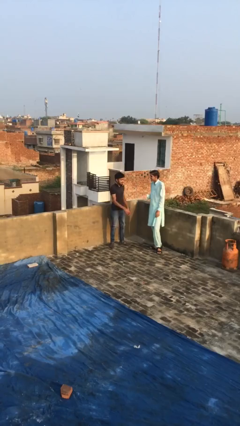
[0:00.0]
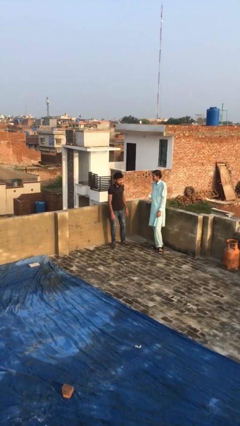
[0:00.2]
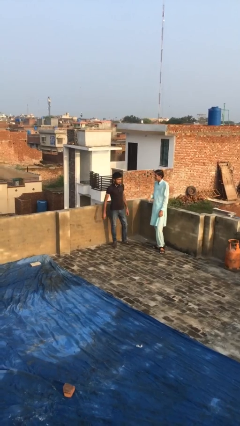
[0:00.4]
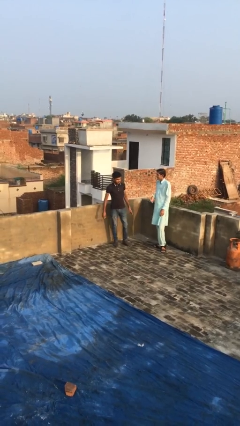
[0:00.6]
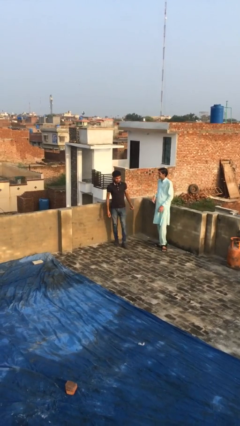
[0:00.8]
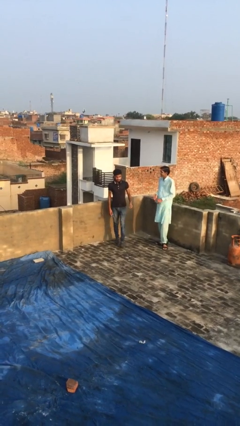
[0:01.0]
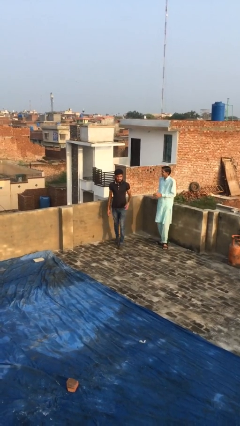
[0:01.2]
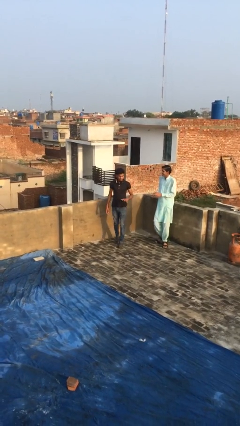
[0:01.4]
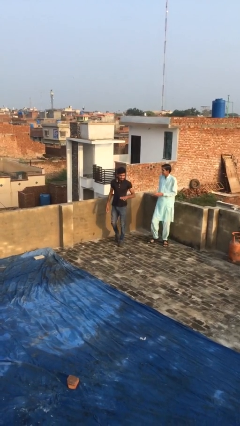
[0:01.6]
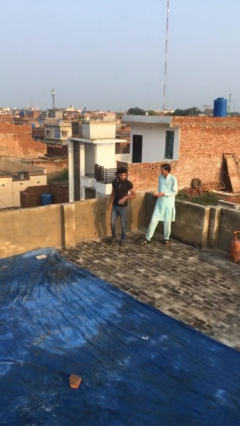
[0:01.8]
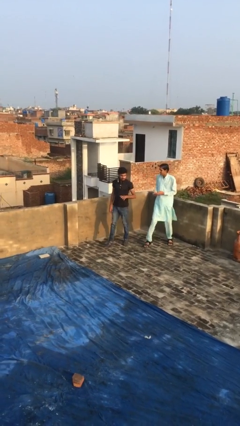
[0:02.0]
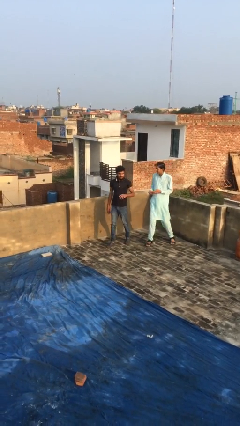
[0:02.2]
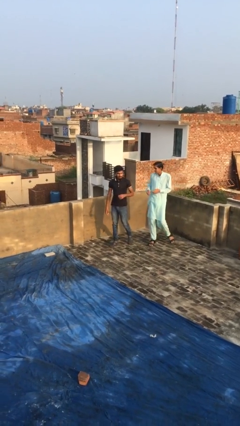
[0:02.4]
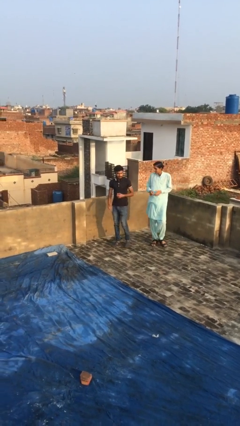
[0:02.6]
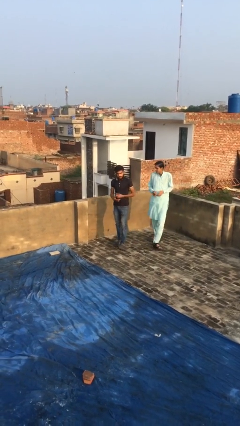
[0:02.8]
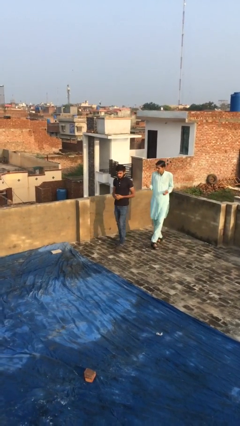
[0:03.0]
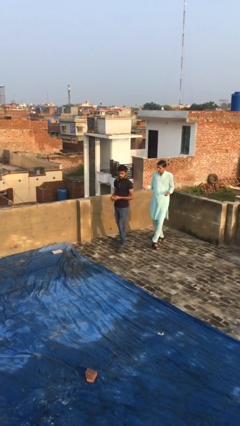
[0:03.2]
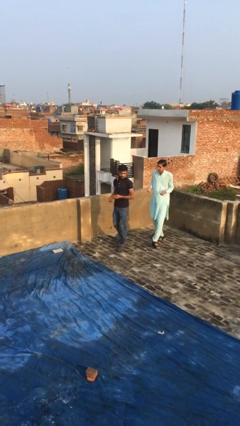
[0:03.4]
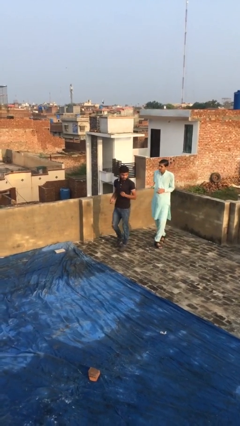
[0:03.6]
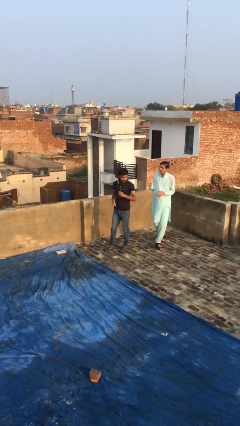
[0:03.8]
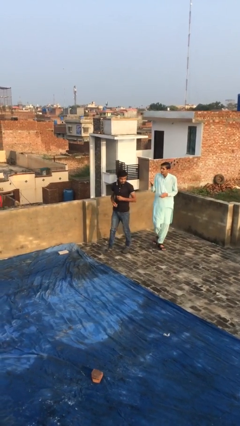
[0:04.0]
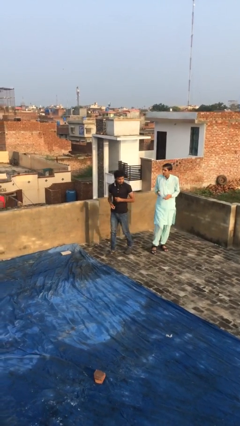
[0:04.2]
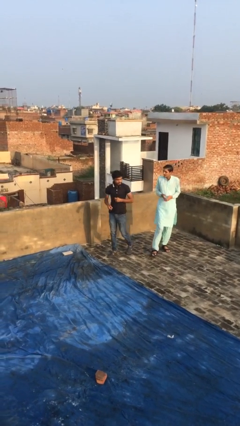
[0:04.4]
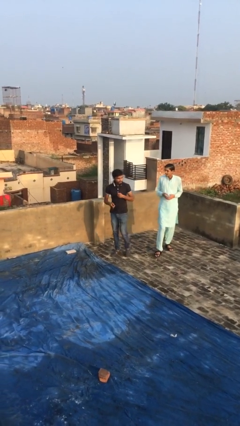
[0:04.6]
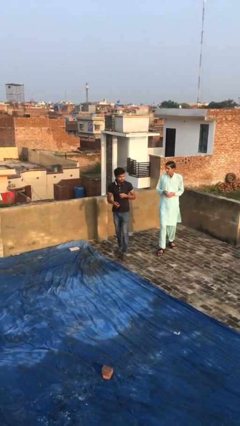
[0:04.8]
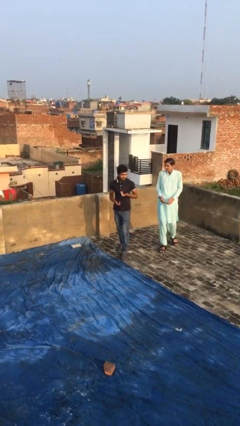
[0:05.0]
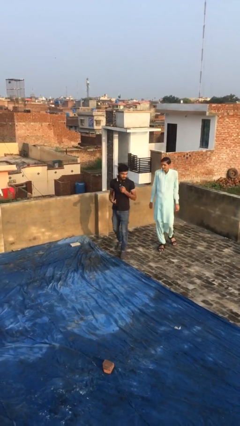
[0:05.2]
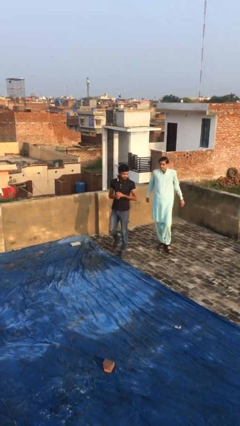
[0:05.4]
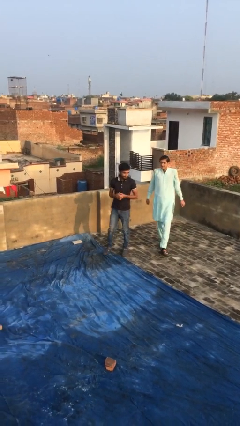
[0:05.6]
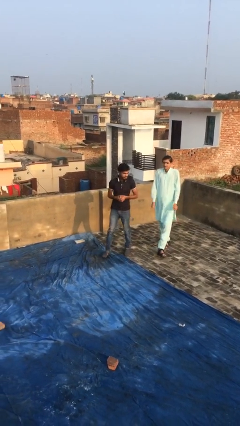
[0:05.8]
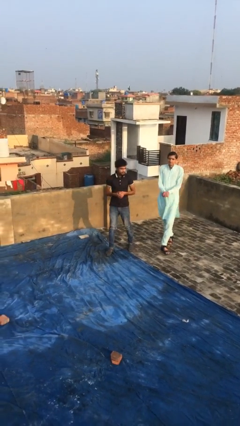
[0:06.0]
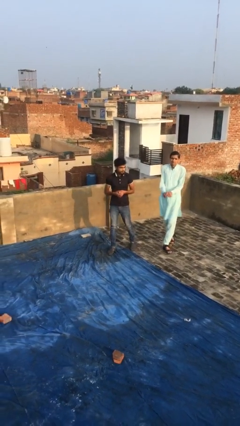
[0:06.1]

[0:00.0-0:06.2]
person talks to person

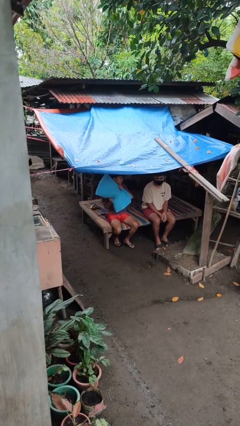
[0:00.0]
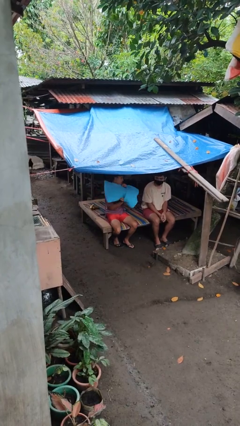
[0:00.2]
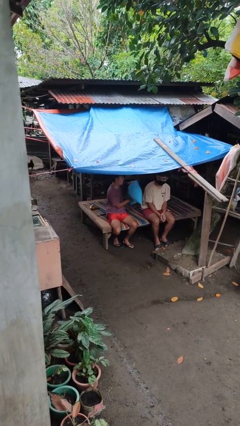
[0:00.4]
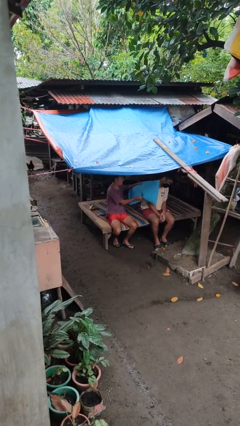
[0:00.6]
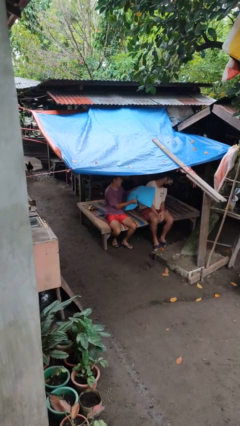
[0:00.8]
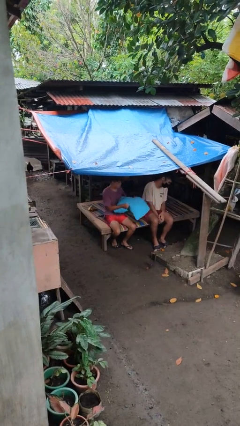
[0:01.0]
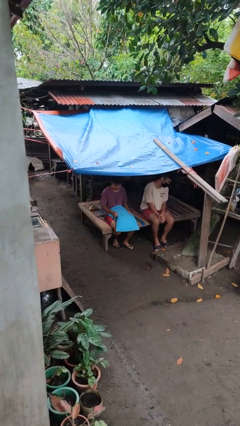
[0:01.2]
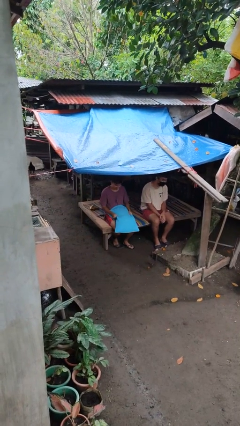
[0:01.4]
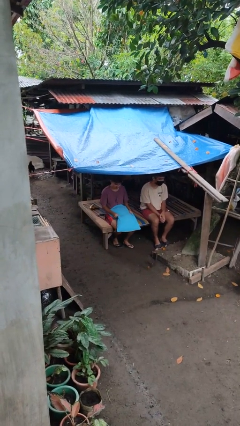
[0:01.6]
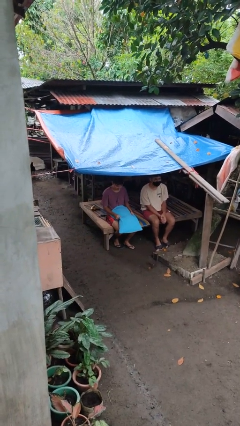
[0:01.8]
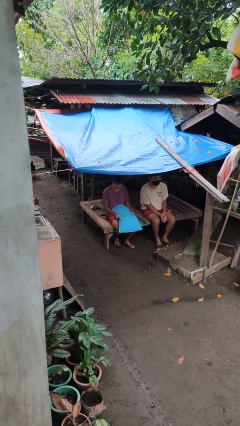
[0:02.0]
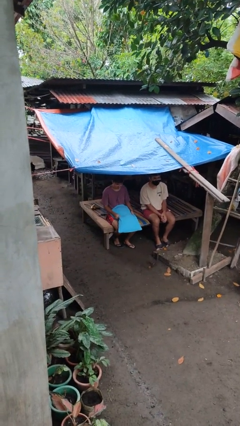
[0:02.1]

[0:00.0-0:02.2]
person hits person with pillow

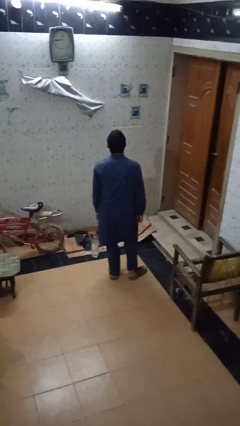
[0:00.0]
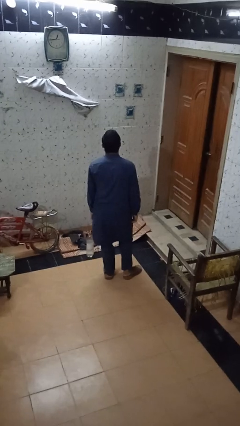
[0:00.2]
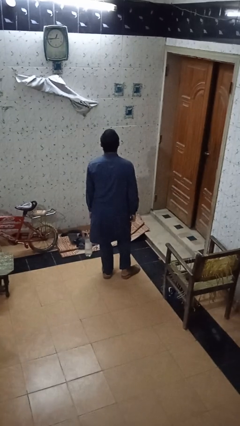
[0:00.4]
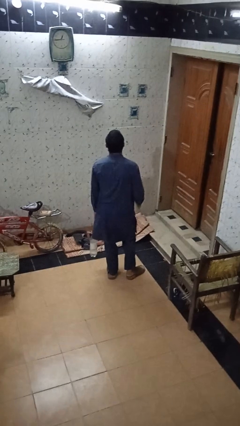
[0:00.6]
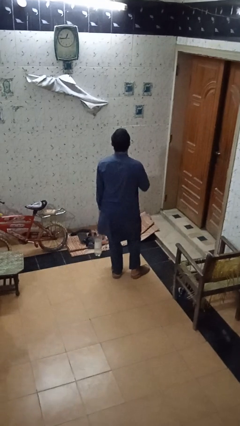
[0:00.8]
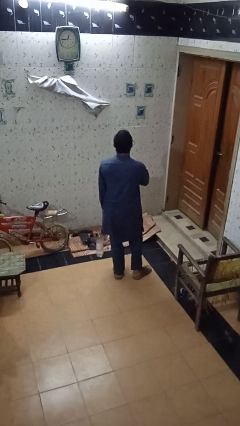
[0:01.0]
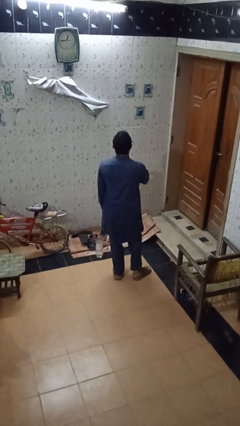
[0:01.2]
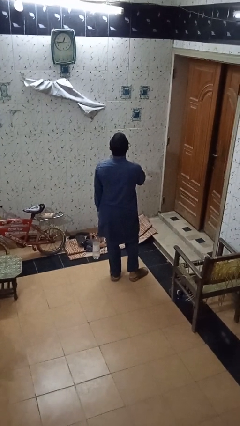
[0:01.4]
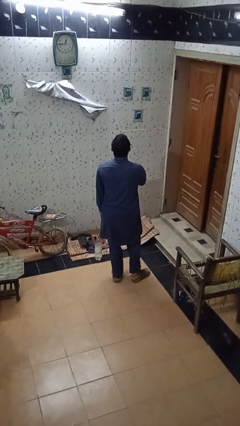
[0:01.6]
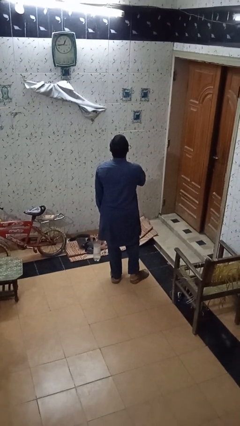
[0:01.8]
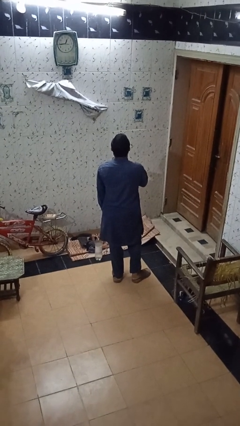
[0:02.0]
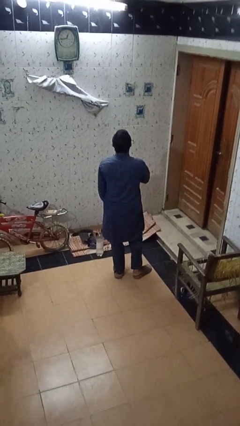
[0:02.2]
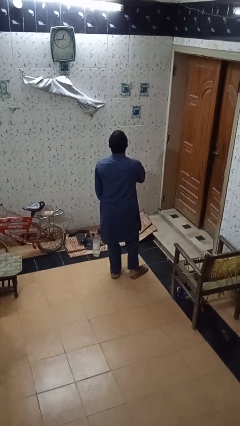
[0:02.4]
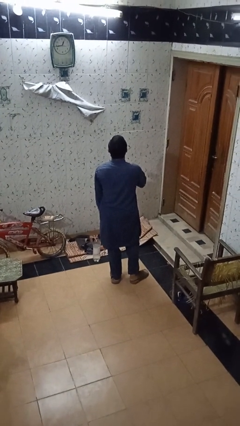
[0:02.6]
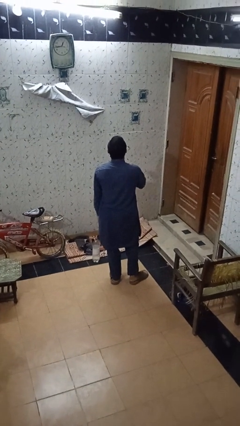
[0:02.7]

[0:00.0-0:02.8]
person drums on chest

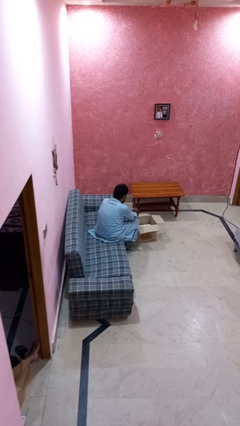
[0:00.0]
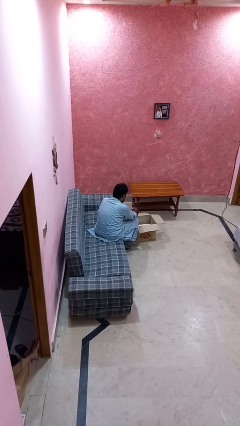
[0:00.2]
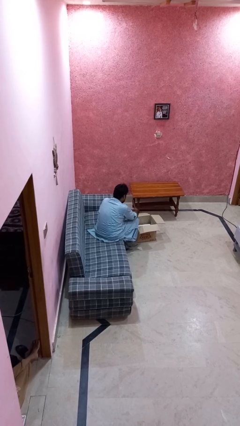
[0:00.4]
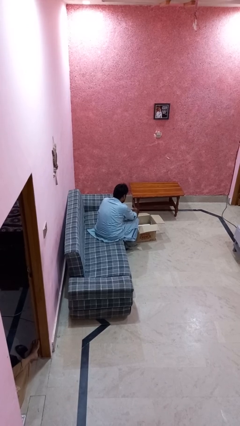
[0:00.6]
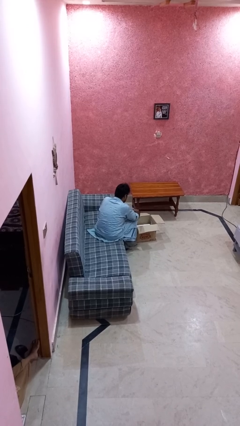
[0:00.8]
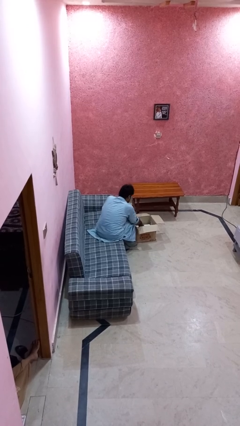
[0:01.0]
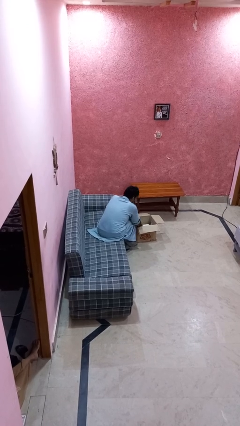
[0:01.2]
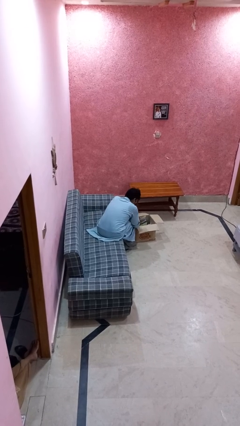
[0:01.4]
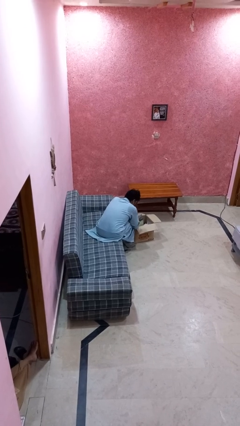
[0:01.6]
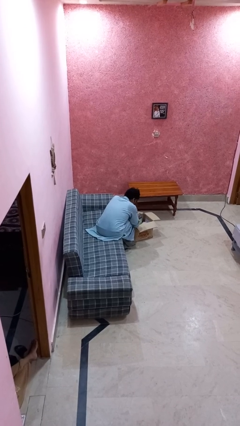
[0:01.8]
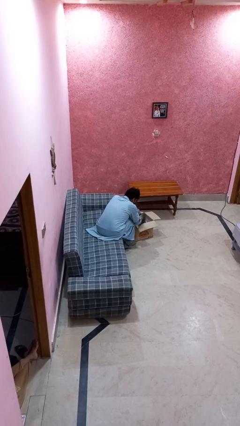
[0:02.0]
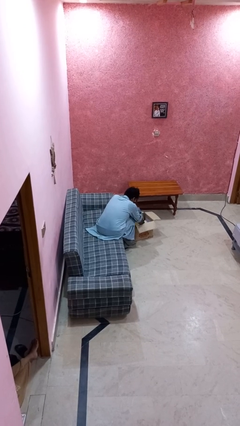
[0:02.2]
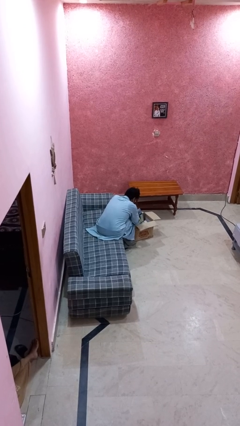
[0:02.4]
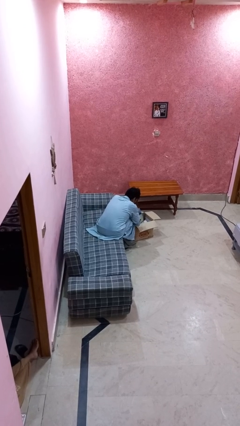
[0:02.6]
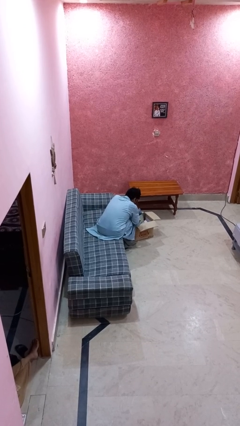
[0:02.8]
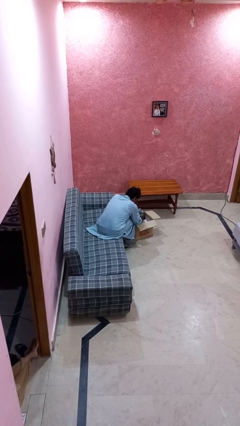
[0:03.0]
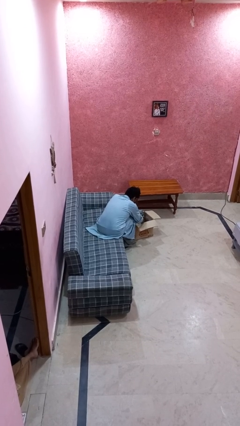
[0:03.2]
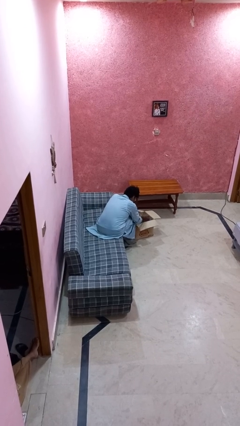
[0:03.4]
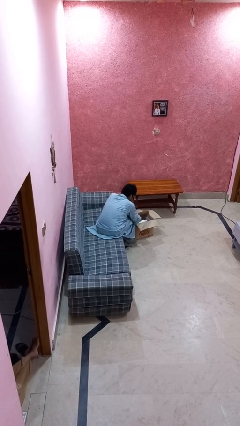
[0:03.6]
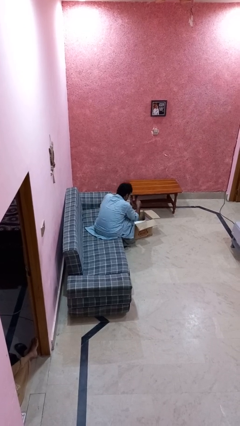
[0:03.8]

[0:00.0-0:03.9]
person searches in box

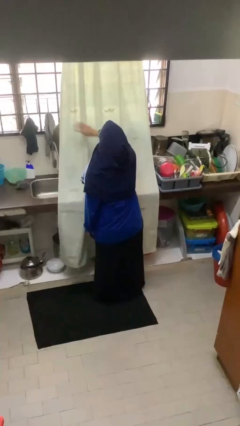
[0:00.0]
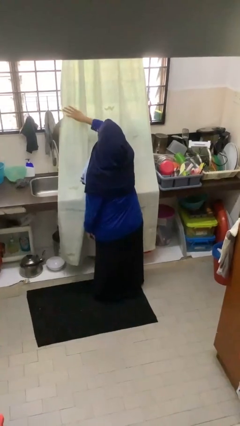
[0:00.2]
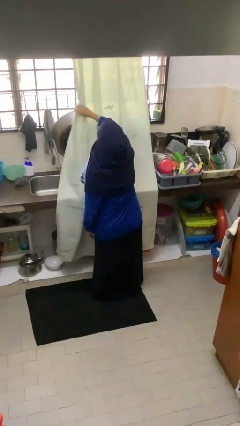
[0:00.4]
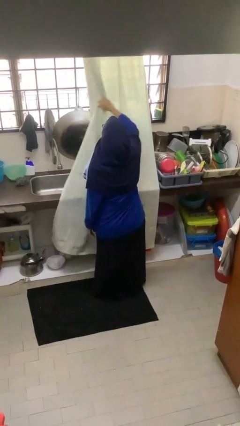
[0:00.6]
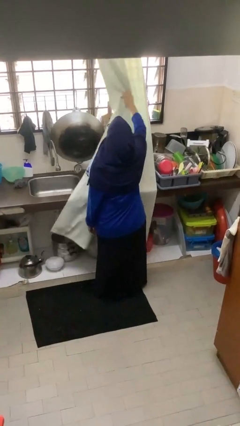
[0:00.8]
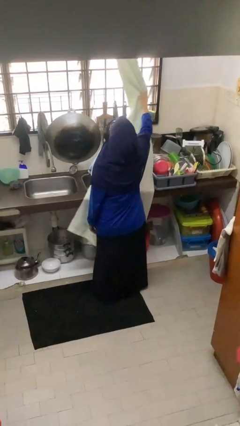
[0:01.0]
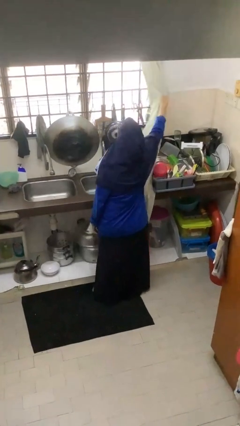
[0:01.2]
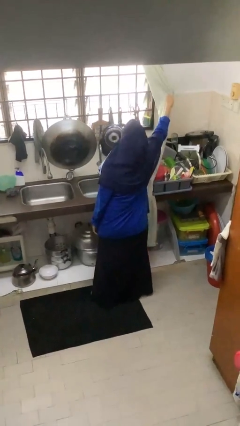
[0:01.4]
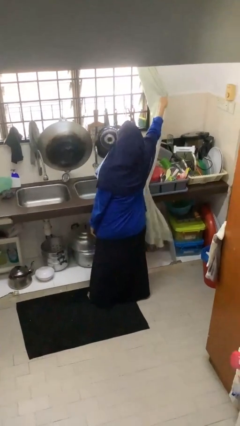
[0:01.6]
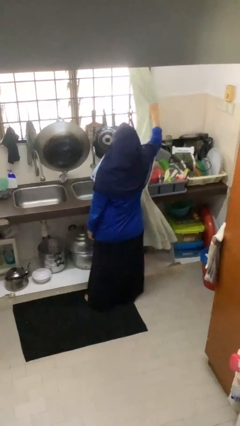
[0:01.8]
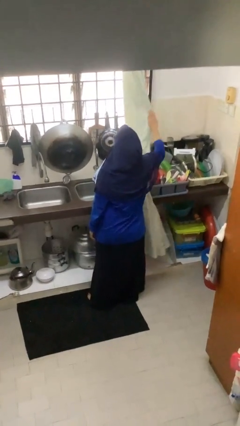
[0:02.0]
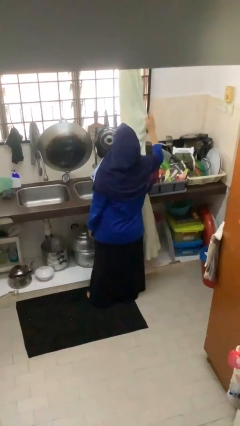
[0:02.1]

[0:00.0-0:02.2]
person opens curtains

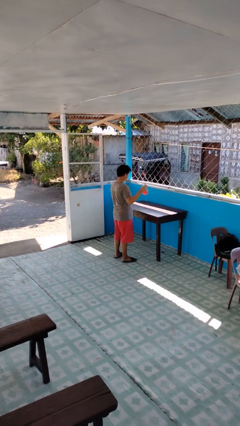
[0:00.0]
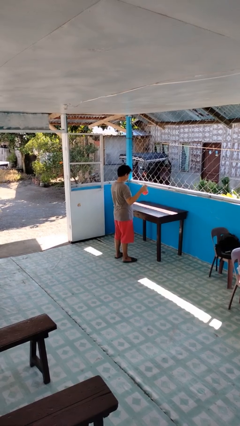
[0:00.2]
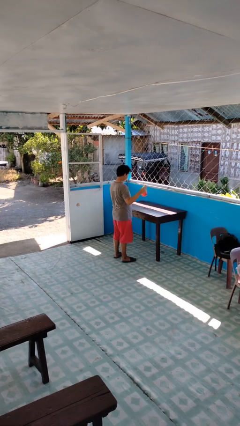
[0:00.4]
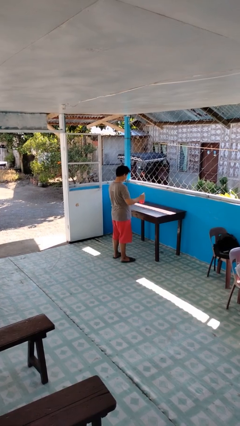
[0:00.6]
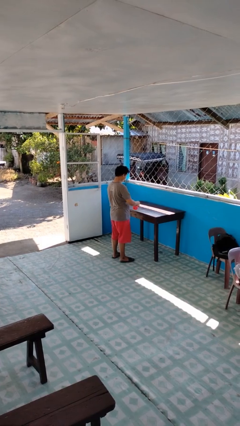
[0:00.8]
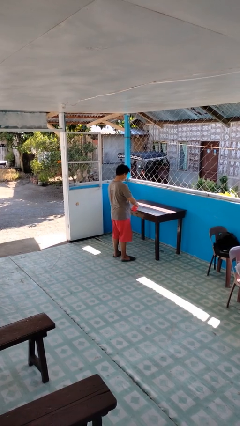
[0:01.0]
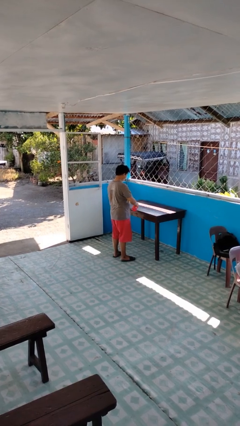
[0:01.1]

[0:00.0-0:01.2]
person sprays from bottle
